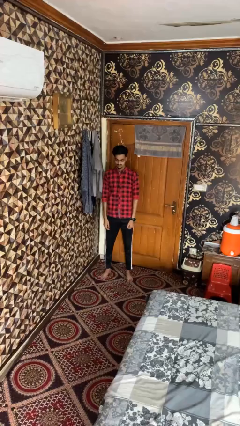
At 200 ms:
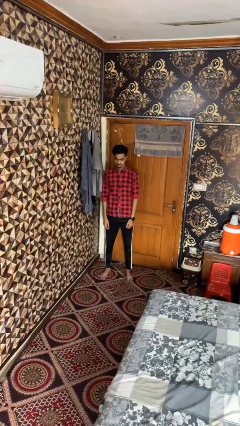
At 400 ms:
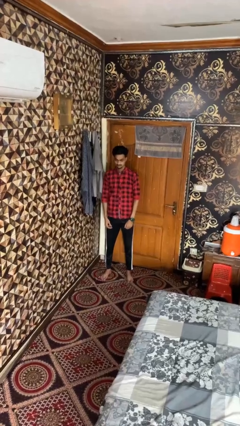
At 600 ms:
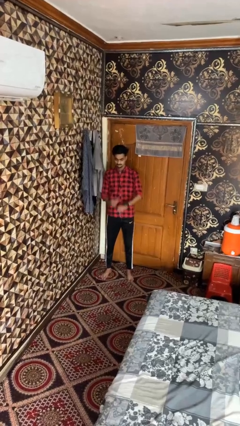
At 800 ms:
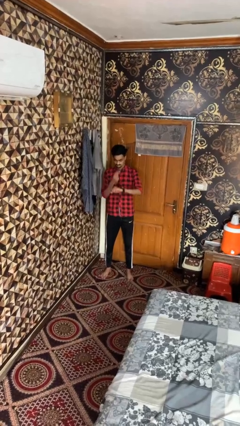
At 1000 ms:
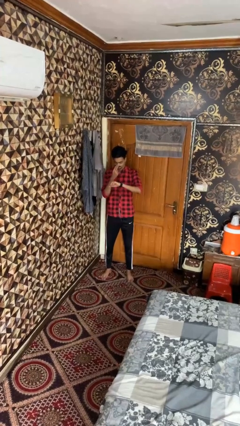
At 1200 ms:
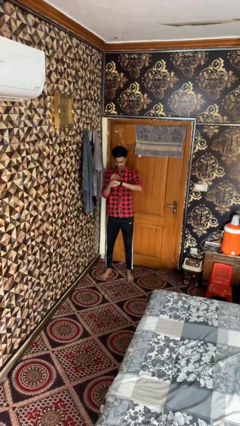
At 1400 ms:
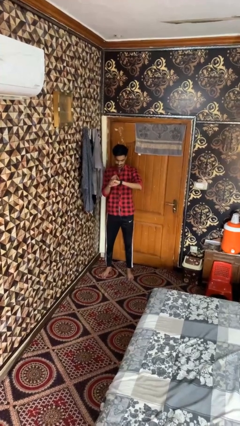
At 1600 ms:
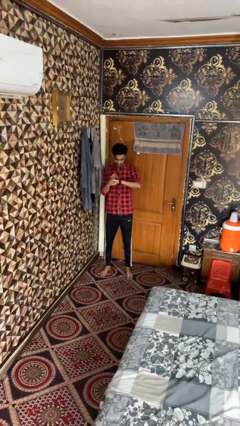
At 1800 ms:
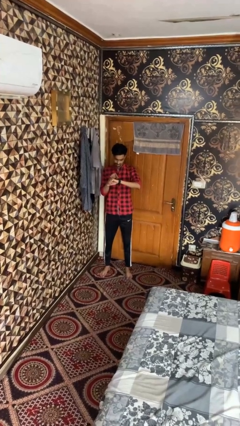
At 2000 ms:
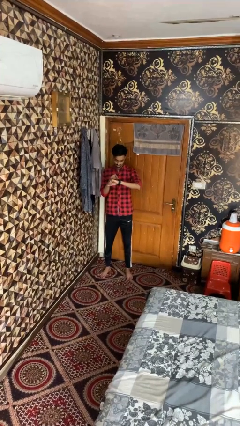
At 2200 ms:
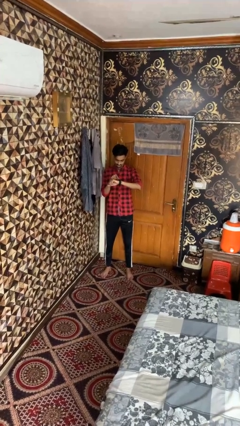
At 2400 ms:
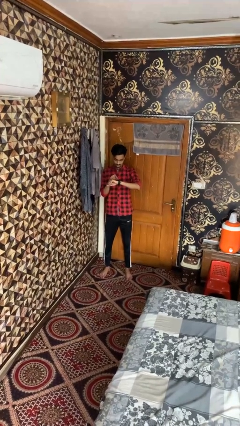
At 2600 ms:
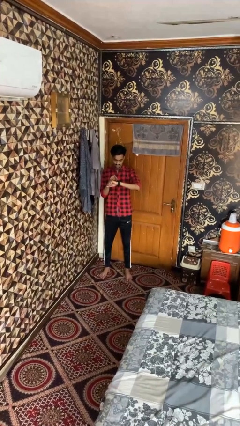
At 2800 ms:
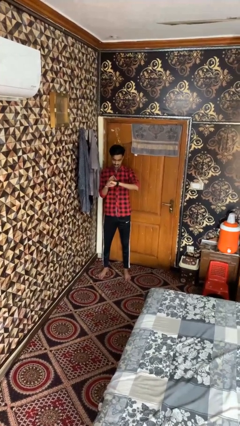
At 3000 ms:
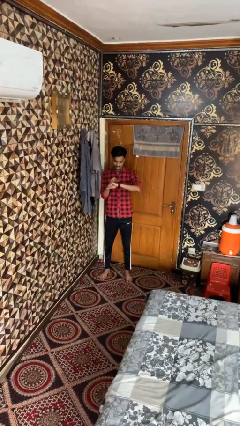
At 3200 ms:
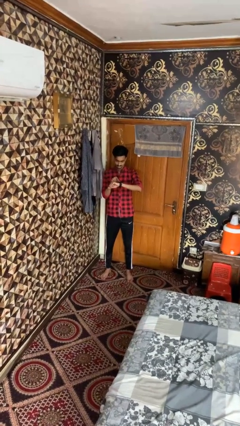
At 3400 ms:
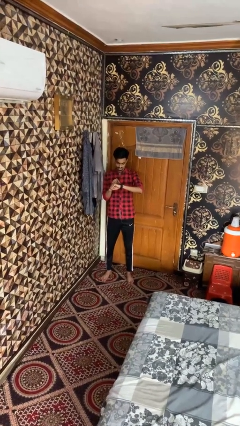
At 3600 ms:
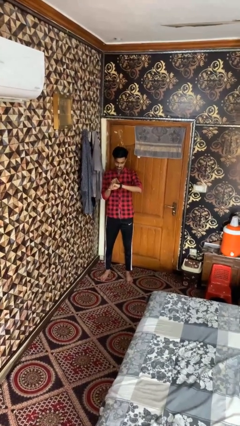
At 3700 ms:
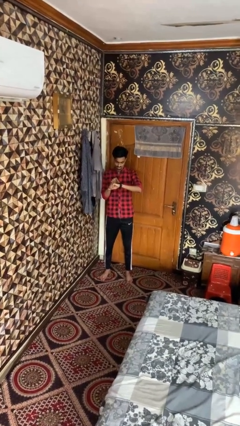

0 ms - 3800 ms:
person gestures watch closely

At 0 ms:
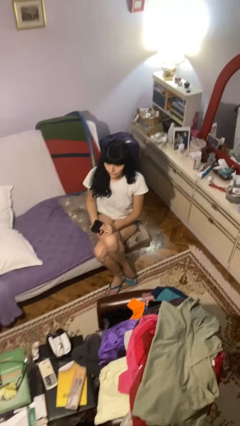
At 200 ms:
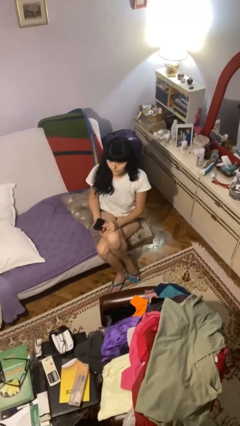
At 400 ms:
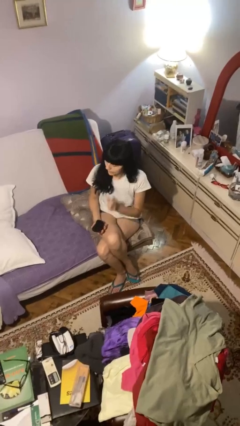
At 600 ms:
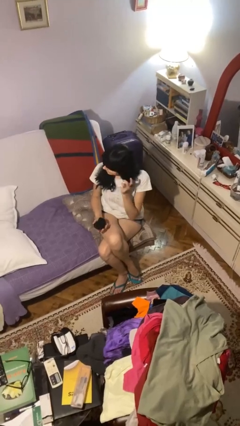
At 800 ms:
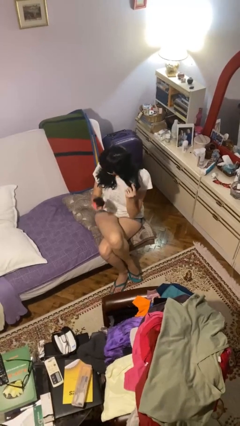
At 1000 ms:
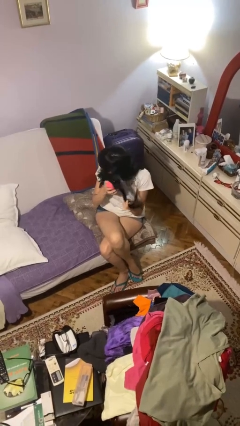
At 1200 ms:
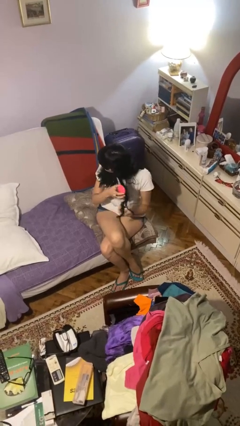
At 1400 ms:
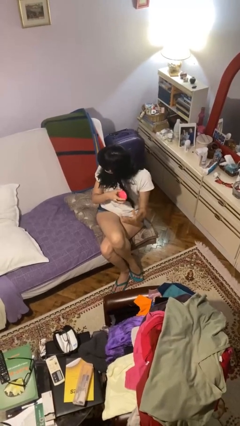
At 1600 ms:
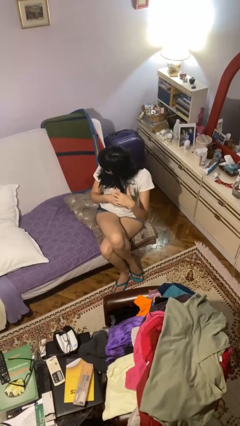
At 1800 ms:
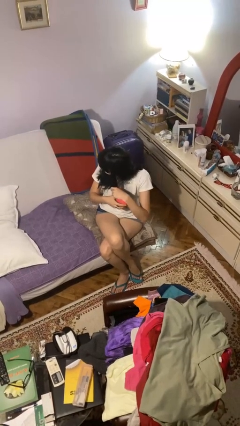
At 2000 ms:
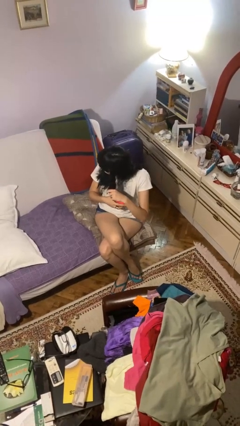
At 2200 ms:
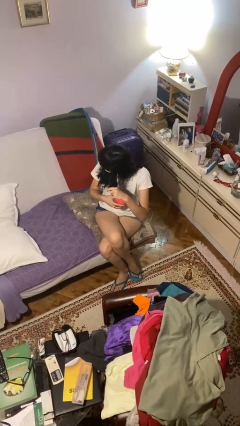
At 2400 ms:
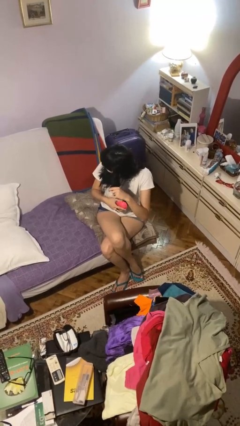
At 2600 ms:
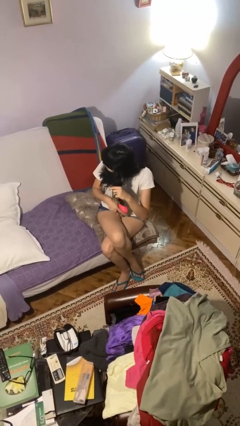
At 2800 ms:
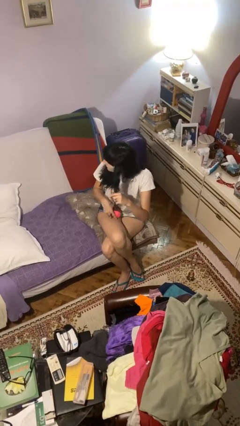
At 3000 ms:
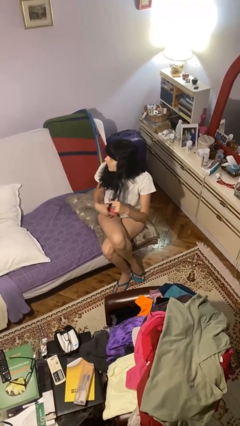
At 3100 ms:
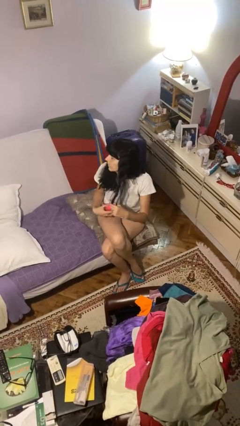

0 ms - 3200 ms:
person brushes hair

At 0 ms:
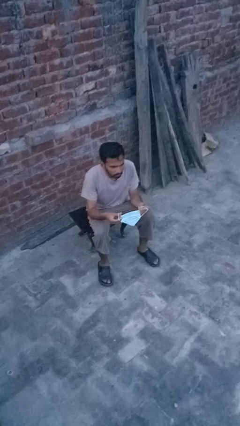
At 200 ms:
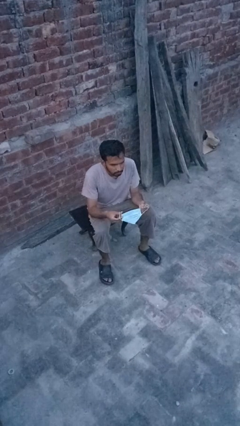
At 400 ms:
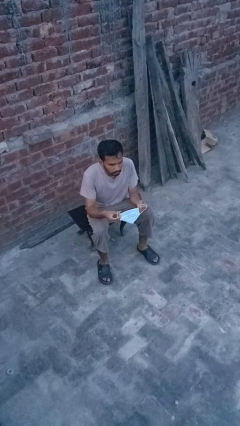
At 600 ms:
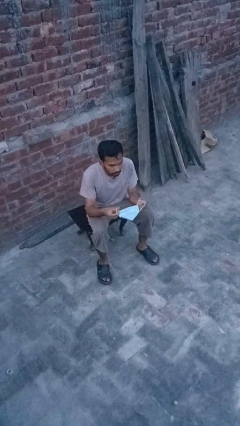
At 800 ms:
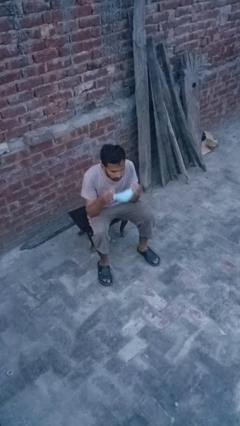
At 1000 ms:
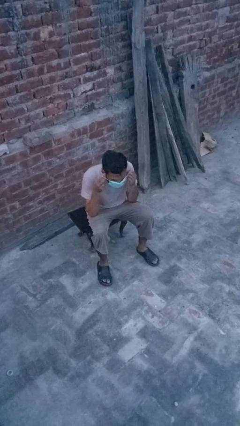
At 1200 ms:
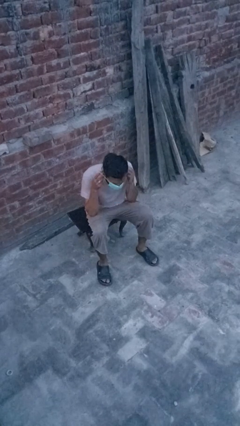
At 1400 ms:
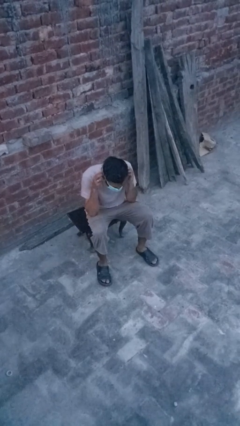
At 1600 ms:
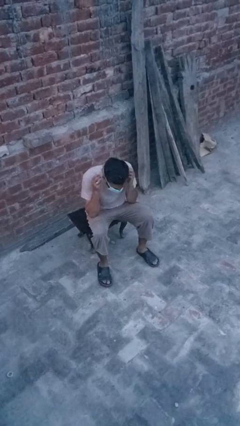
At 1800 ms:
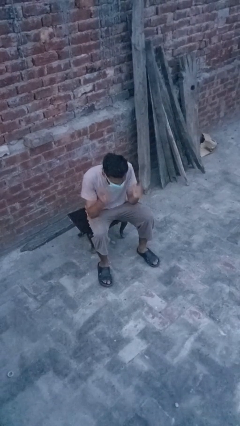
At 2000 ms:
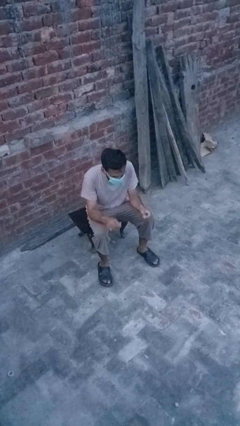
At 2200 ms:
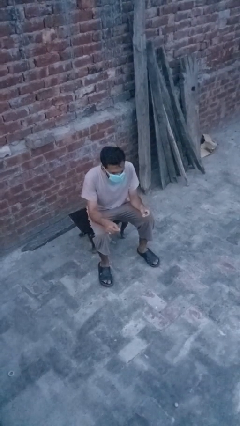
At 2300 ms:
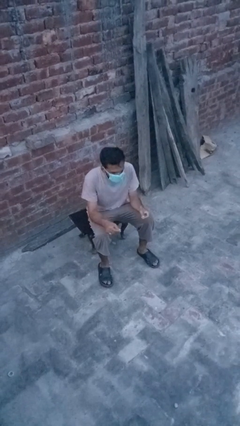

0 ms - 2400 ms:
person puts on facemask

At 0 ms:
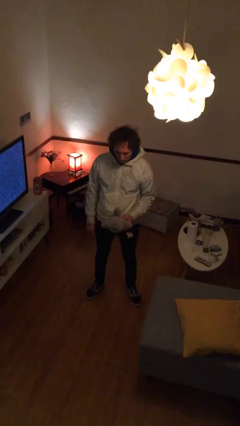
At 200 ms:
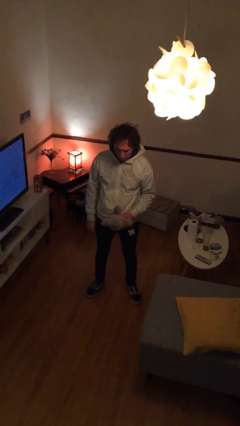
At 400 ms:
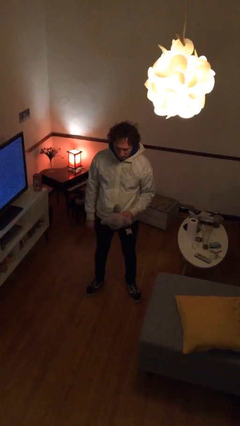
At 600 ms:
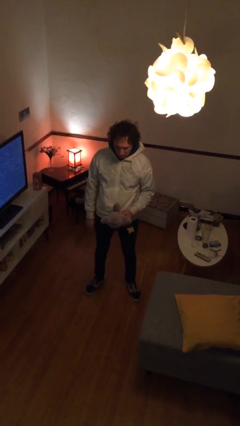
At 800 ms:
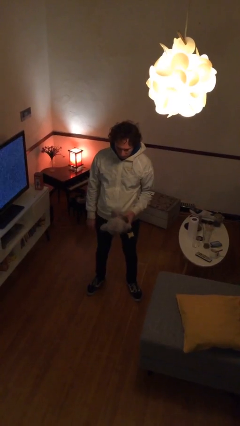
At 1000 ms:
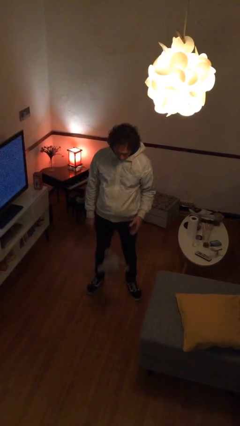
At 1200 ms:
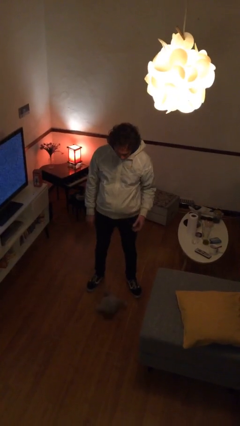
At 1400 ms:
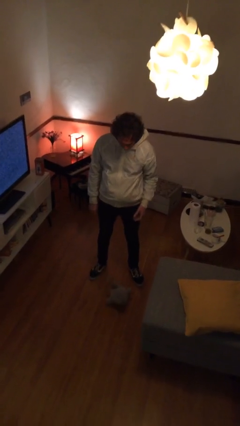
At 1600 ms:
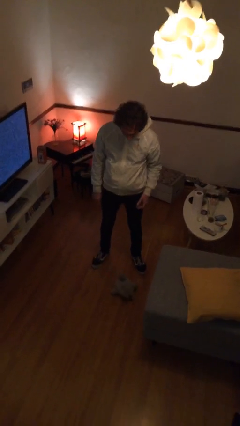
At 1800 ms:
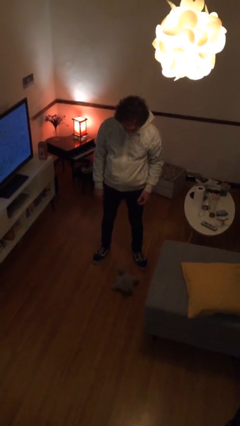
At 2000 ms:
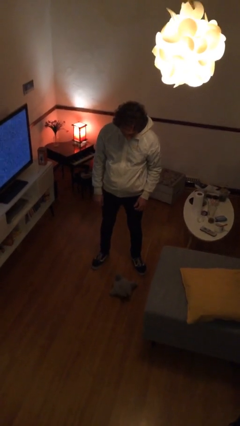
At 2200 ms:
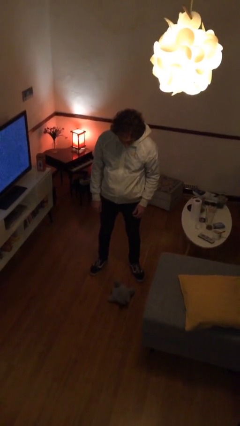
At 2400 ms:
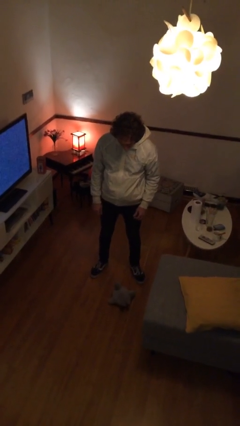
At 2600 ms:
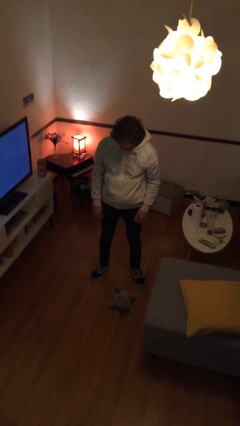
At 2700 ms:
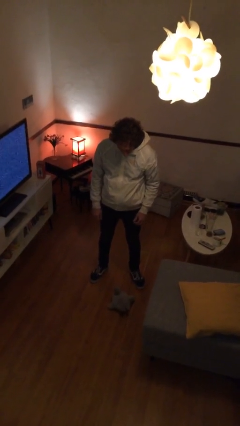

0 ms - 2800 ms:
person drops object

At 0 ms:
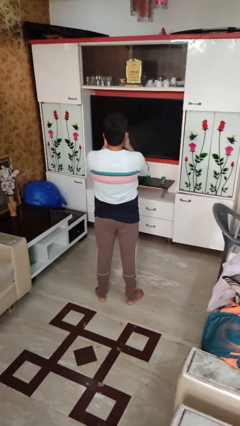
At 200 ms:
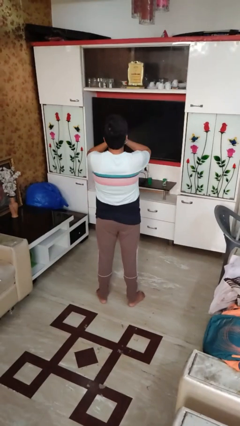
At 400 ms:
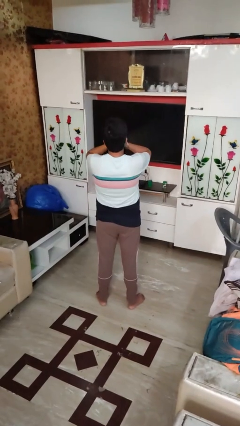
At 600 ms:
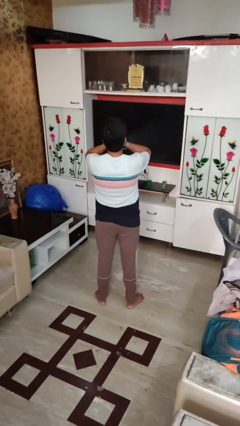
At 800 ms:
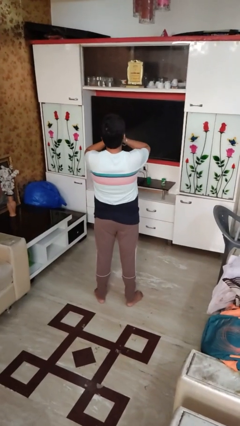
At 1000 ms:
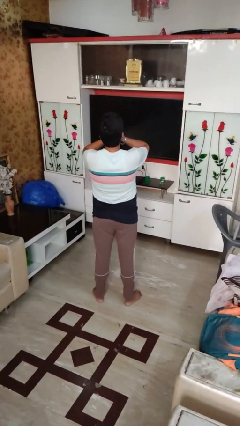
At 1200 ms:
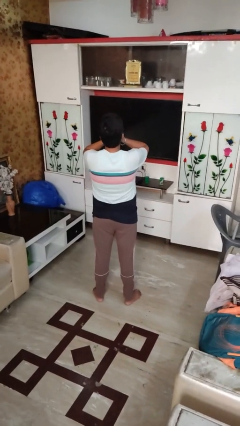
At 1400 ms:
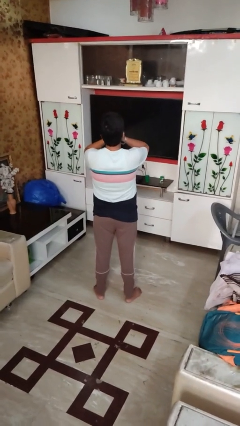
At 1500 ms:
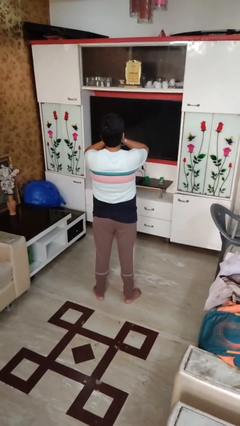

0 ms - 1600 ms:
person covers face with hands

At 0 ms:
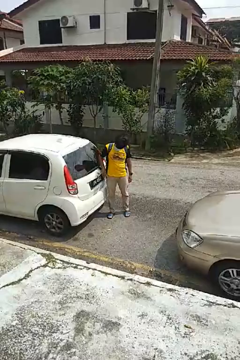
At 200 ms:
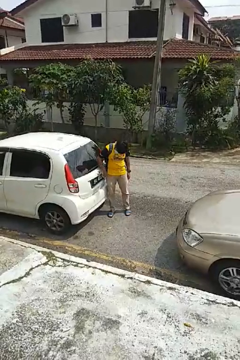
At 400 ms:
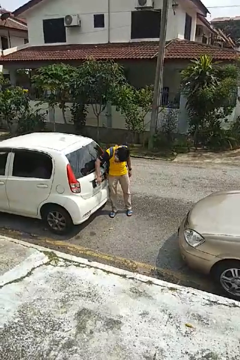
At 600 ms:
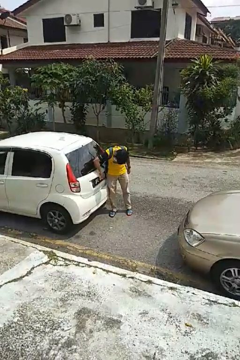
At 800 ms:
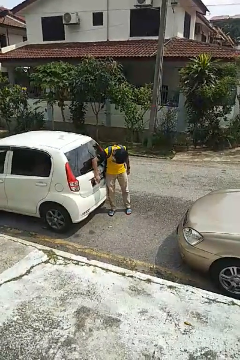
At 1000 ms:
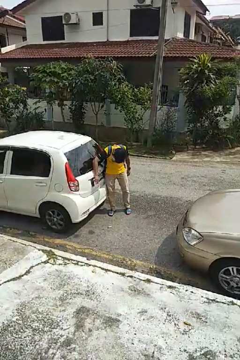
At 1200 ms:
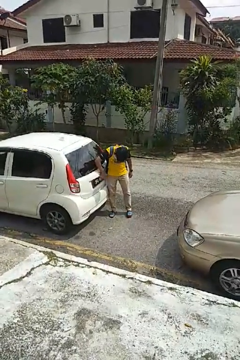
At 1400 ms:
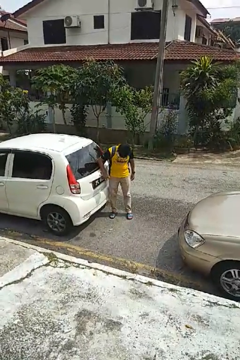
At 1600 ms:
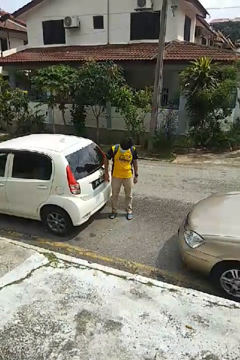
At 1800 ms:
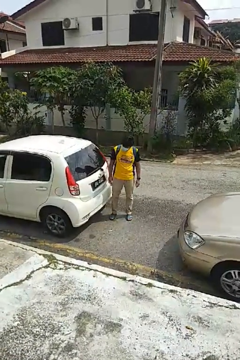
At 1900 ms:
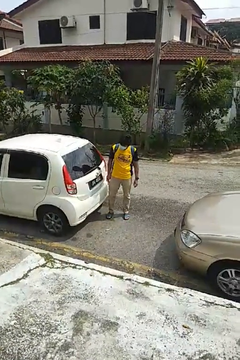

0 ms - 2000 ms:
person polishes car with rag

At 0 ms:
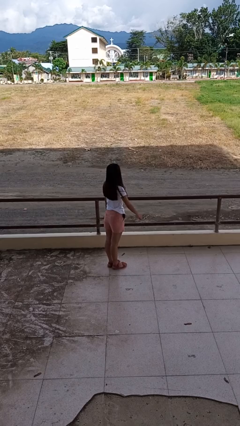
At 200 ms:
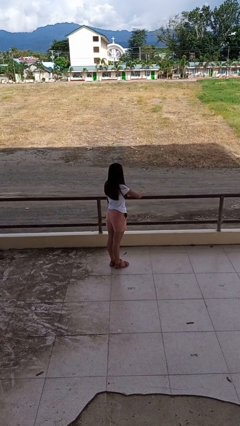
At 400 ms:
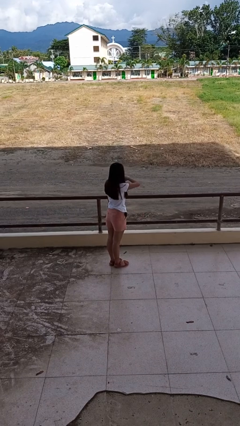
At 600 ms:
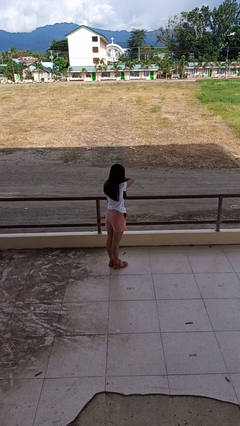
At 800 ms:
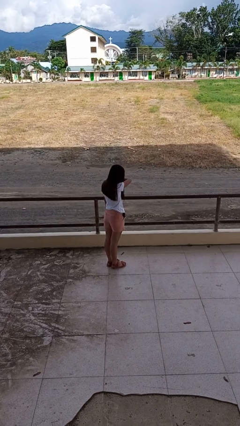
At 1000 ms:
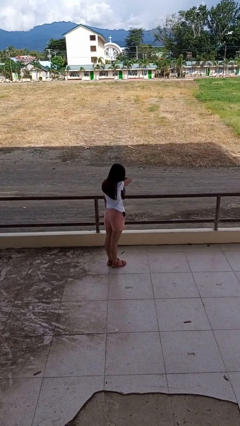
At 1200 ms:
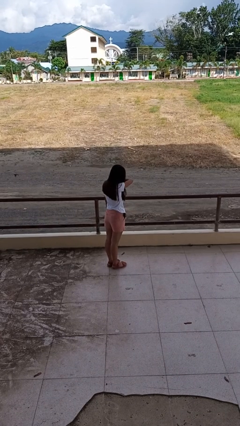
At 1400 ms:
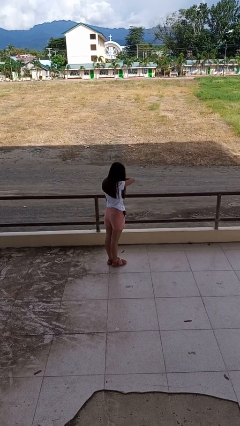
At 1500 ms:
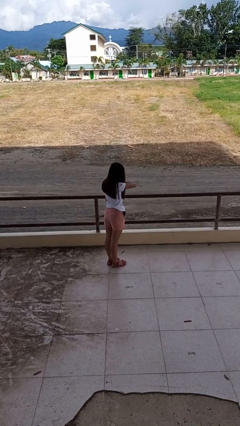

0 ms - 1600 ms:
person sneezes into arm
